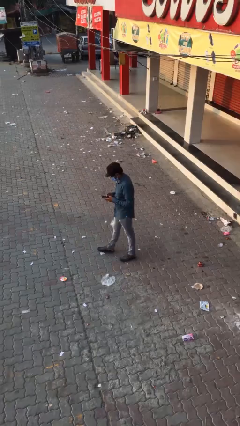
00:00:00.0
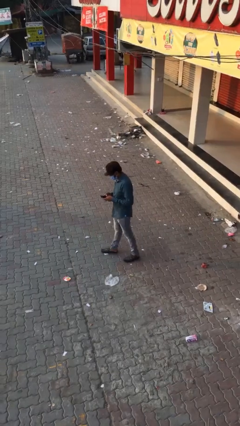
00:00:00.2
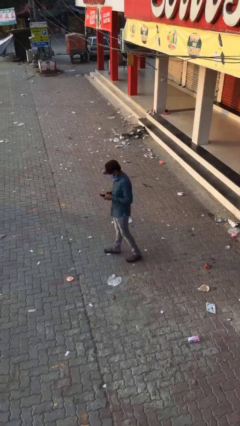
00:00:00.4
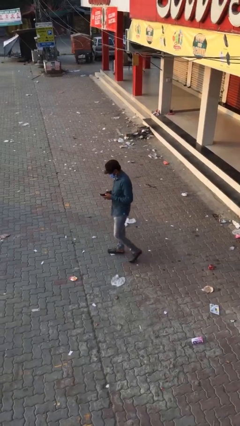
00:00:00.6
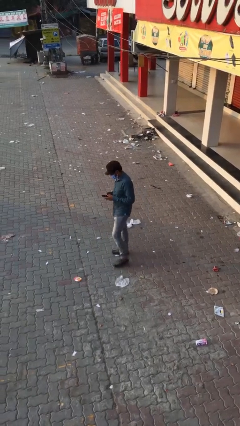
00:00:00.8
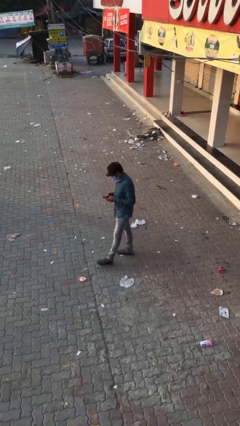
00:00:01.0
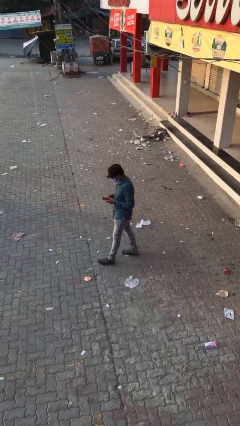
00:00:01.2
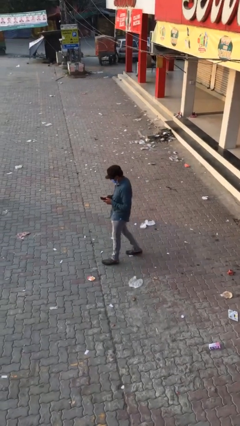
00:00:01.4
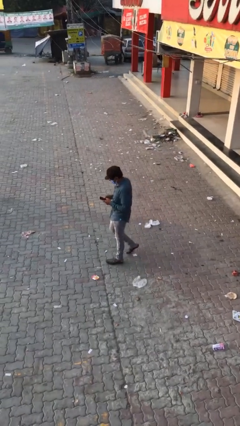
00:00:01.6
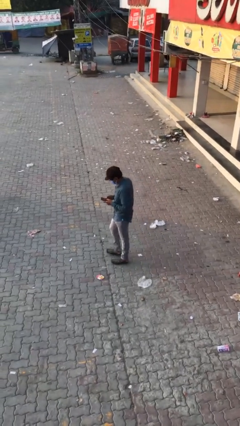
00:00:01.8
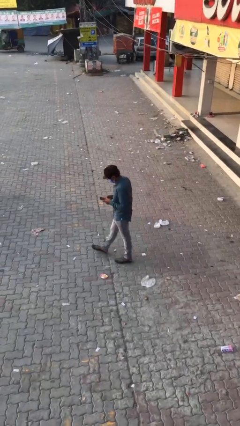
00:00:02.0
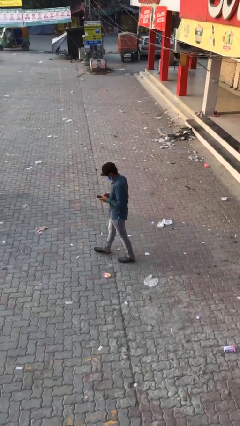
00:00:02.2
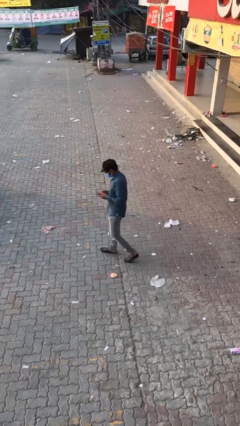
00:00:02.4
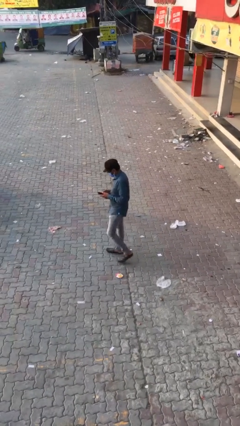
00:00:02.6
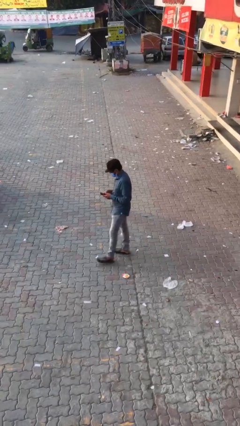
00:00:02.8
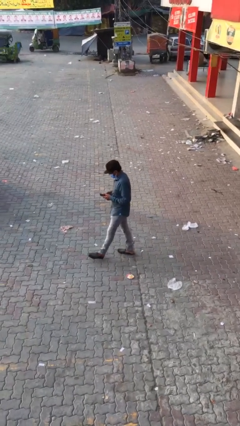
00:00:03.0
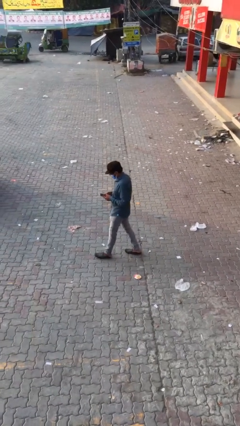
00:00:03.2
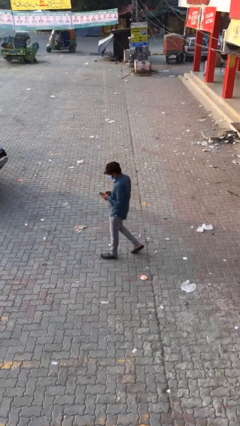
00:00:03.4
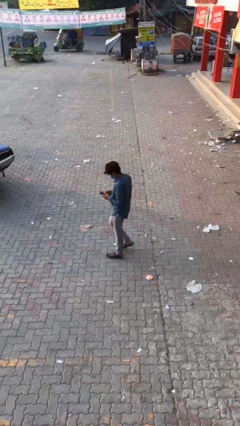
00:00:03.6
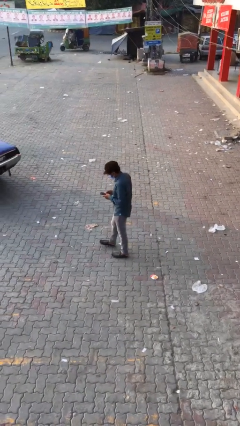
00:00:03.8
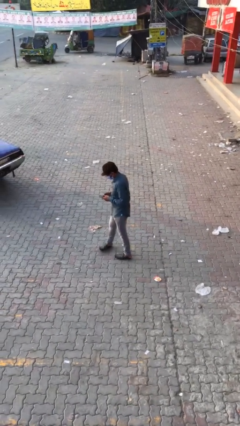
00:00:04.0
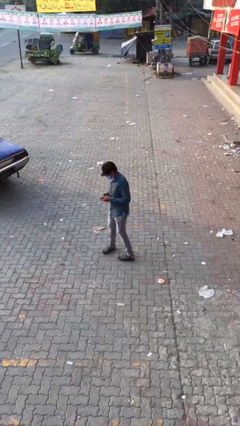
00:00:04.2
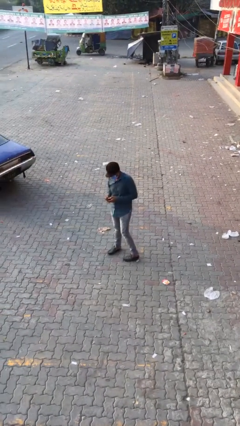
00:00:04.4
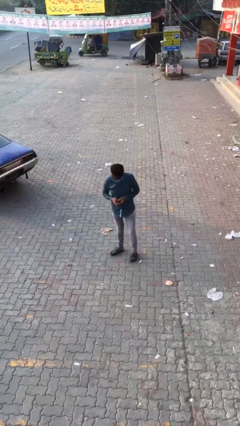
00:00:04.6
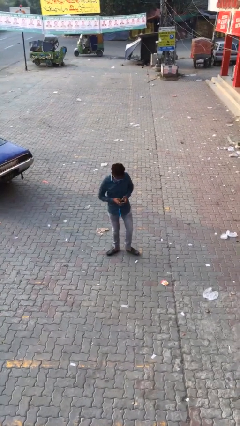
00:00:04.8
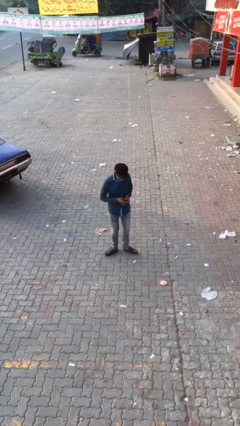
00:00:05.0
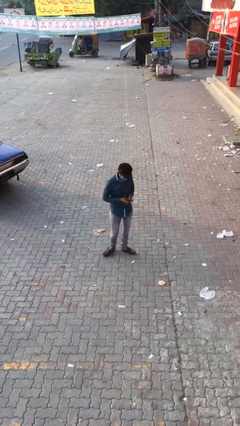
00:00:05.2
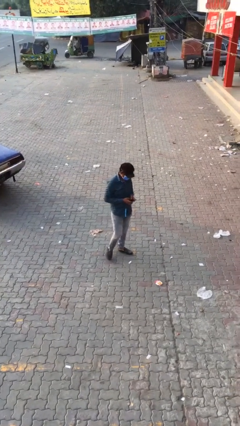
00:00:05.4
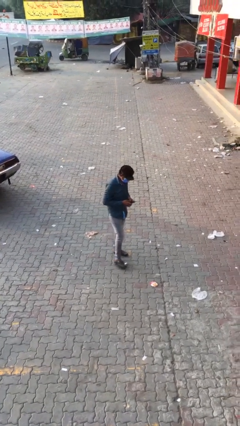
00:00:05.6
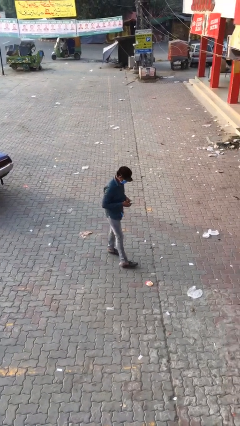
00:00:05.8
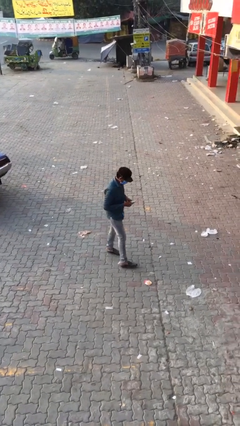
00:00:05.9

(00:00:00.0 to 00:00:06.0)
person texts on phone

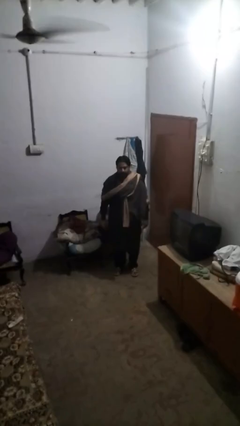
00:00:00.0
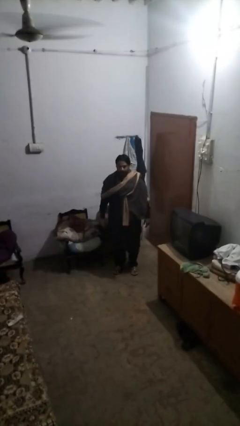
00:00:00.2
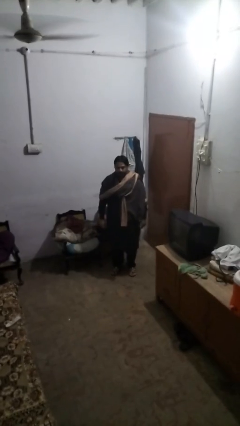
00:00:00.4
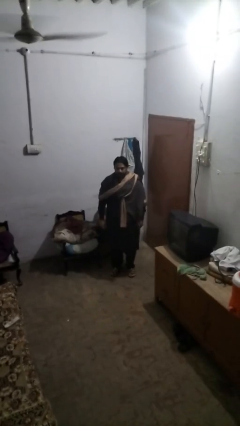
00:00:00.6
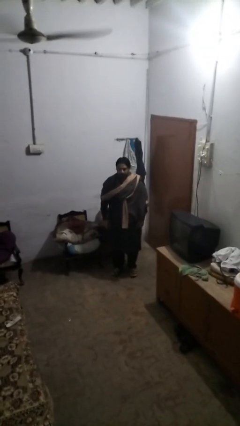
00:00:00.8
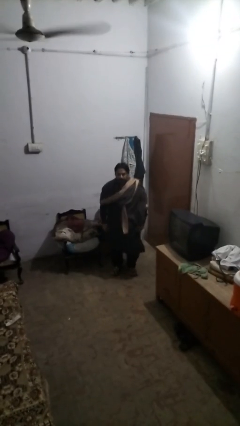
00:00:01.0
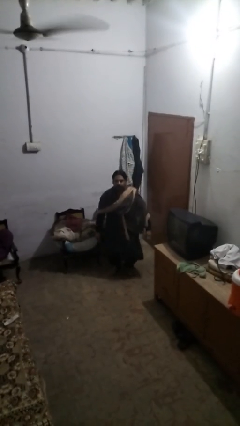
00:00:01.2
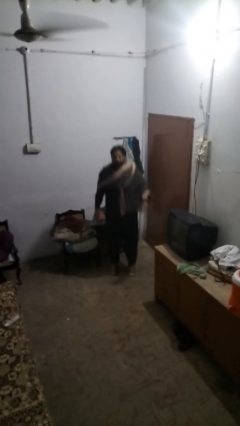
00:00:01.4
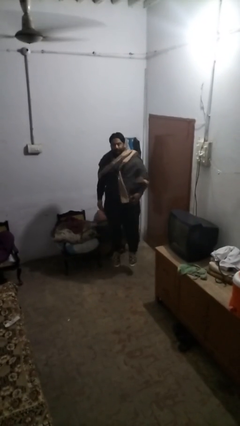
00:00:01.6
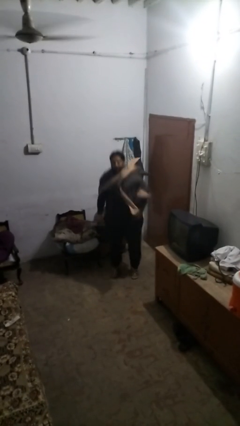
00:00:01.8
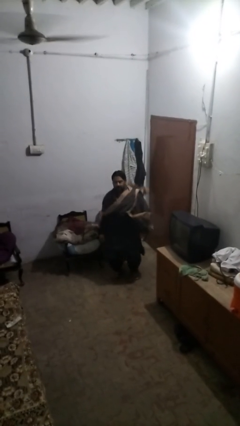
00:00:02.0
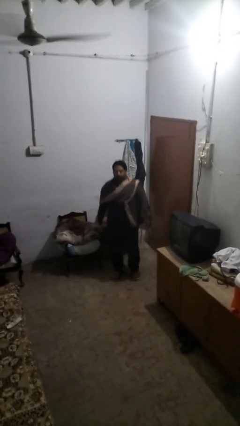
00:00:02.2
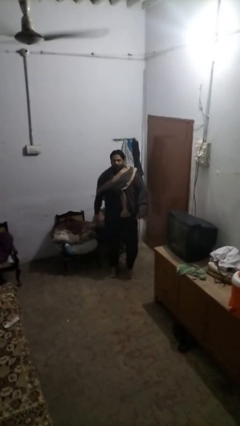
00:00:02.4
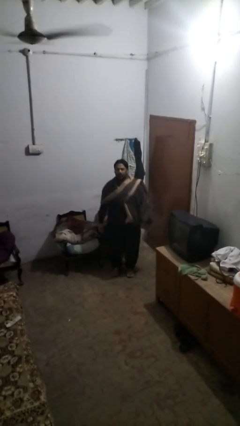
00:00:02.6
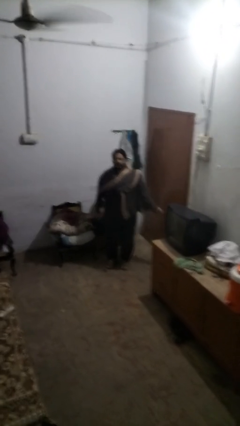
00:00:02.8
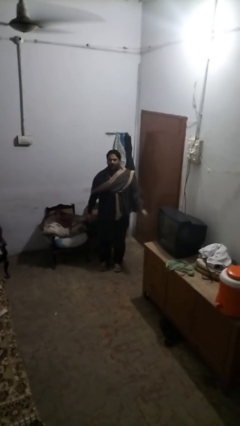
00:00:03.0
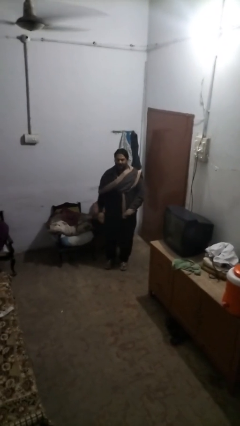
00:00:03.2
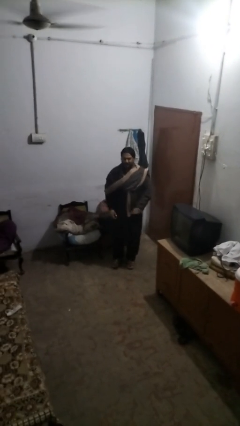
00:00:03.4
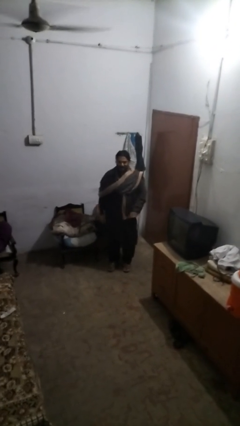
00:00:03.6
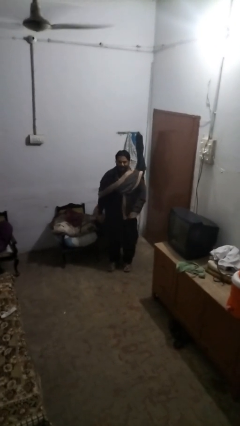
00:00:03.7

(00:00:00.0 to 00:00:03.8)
person jumps

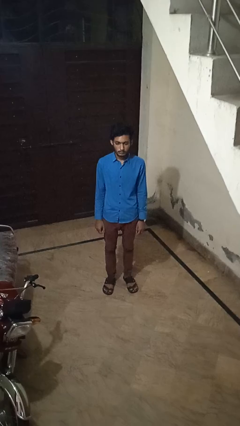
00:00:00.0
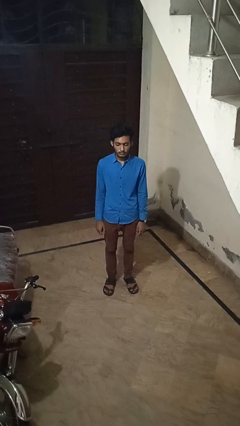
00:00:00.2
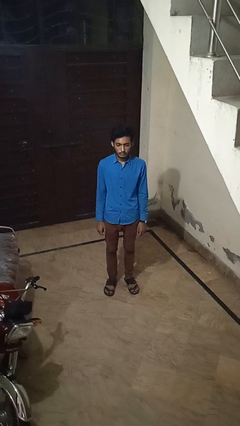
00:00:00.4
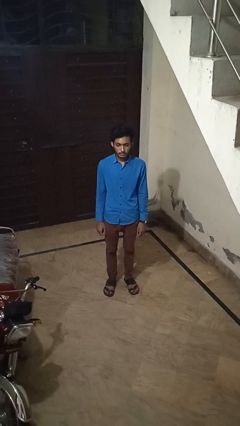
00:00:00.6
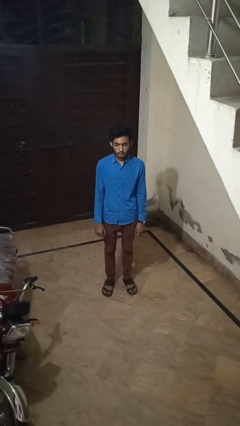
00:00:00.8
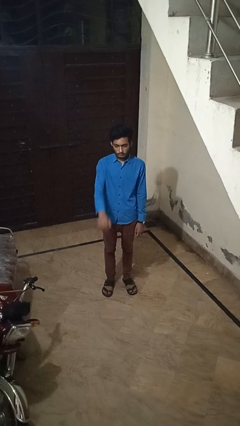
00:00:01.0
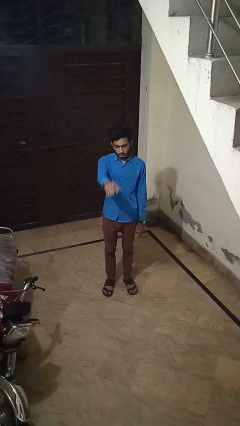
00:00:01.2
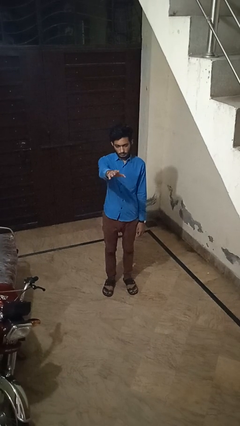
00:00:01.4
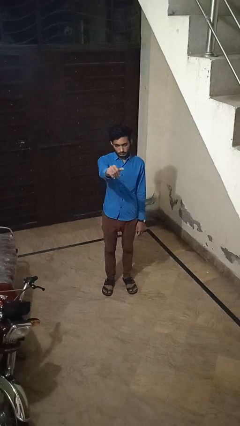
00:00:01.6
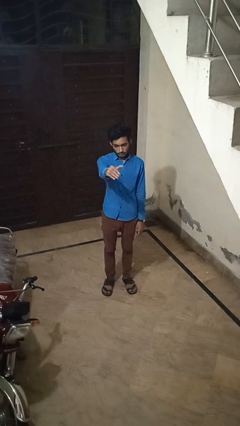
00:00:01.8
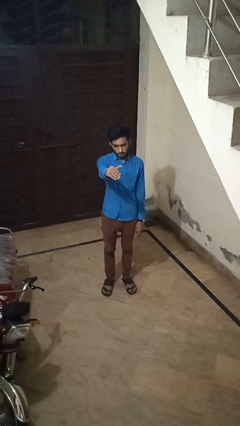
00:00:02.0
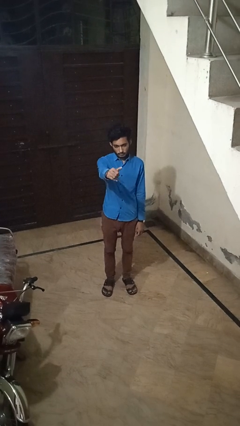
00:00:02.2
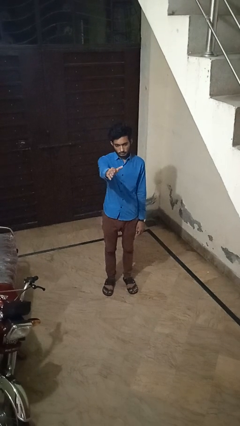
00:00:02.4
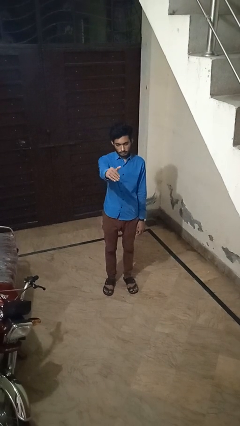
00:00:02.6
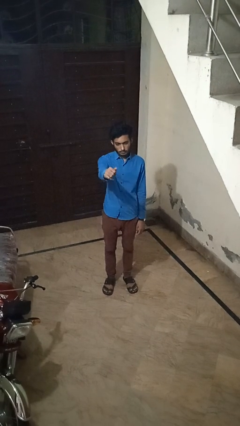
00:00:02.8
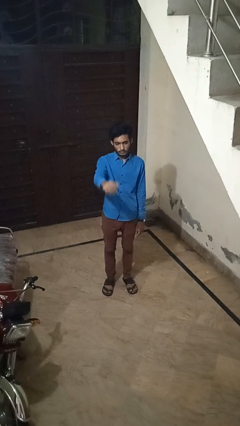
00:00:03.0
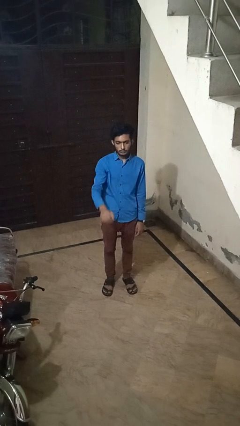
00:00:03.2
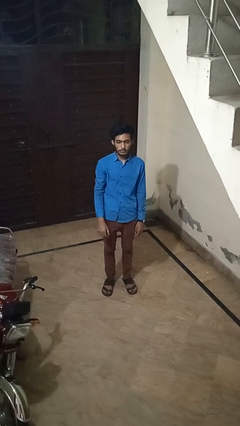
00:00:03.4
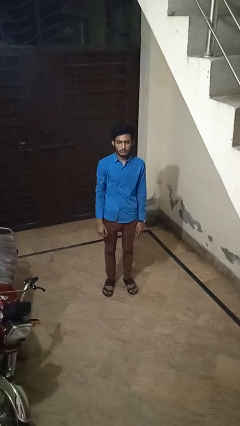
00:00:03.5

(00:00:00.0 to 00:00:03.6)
person gestures come here

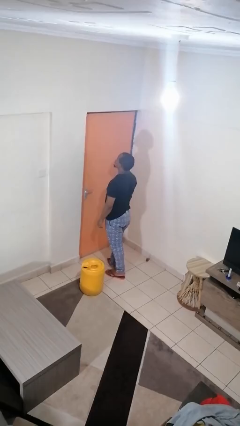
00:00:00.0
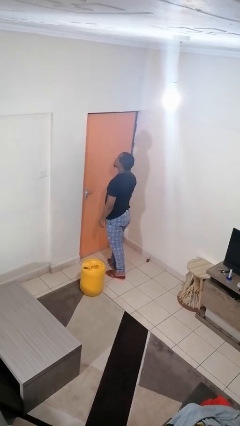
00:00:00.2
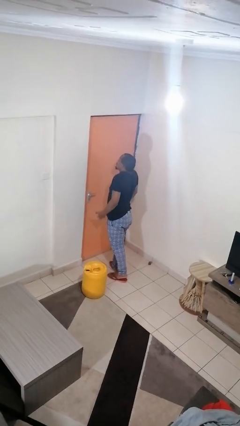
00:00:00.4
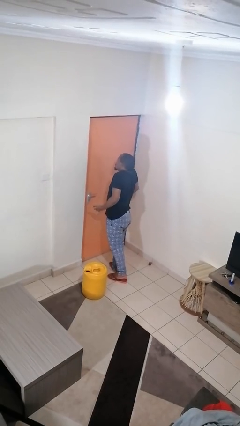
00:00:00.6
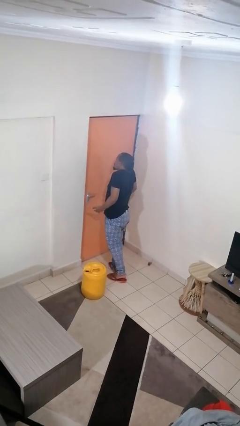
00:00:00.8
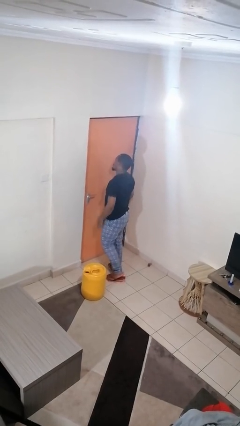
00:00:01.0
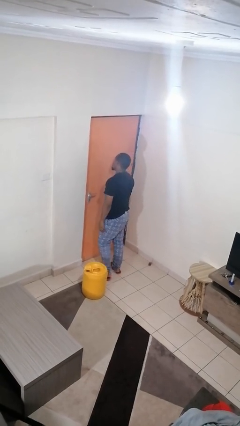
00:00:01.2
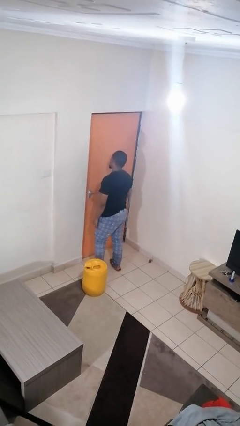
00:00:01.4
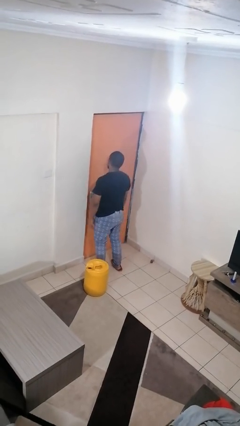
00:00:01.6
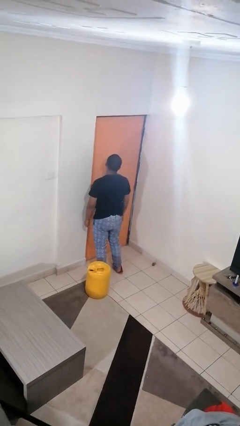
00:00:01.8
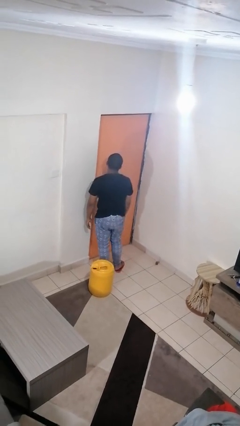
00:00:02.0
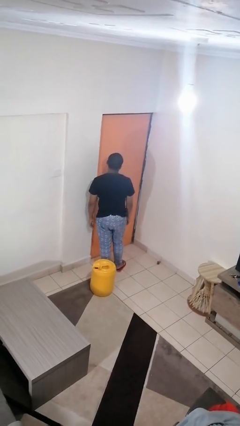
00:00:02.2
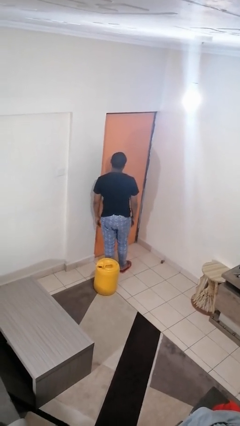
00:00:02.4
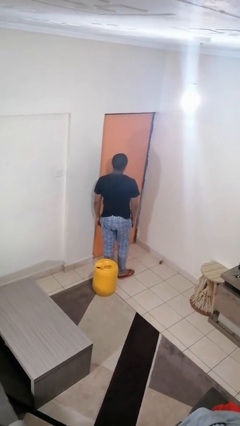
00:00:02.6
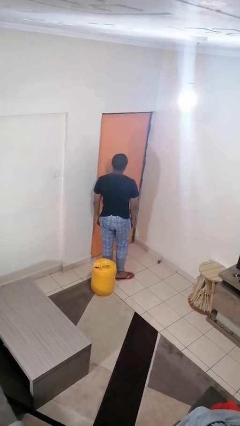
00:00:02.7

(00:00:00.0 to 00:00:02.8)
person shrugs

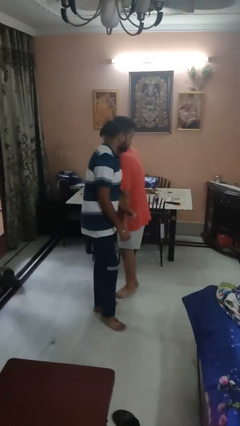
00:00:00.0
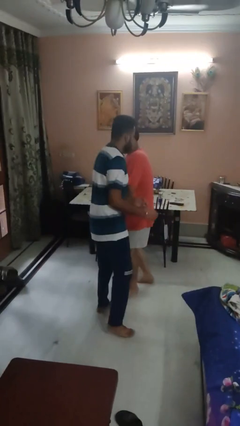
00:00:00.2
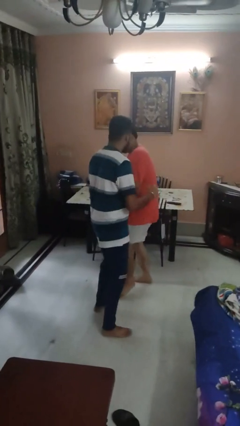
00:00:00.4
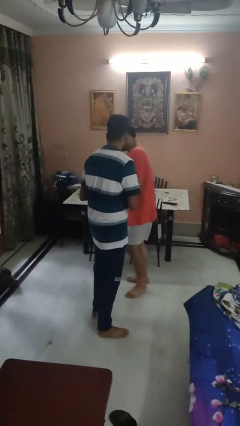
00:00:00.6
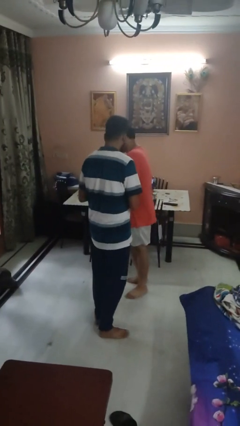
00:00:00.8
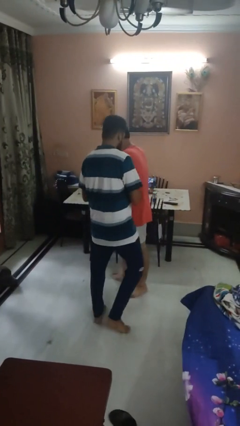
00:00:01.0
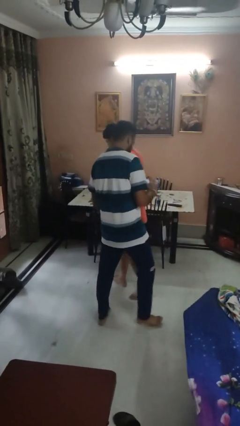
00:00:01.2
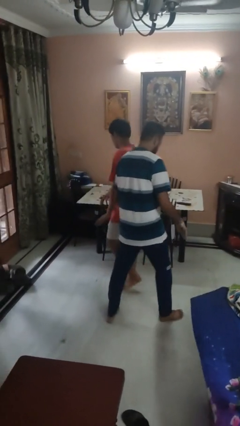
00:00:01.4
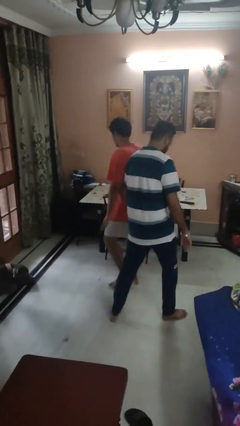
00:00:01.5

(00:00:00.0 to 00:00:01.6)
person bumps into person

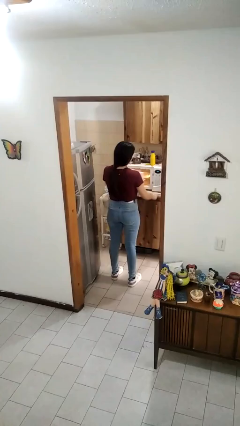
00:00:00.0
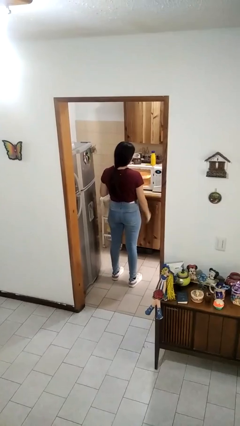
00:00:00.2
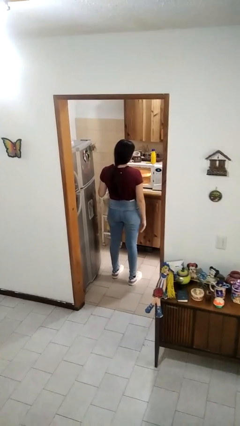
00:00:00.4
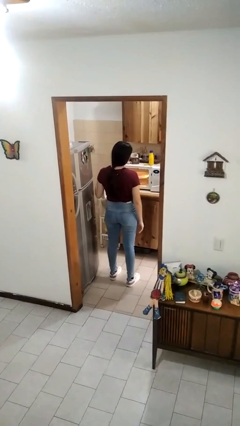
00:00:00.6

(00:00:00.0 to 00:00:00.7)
person opens microwave
